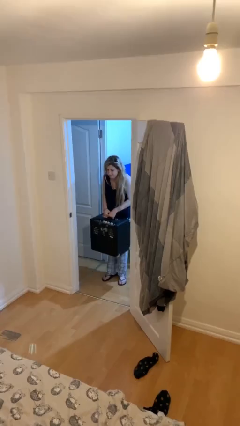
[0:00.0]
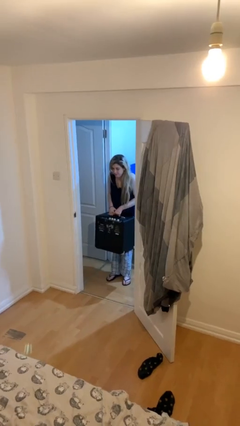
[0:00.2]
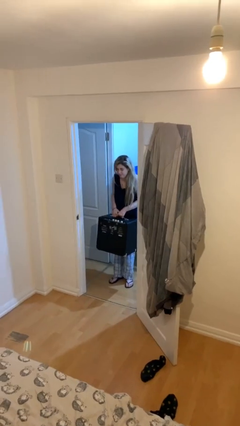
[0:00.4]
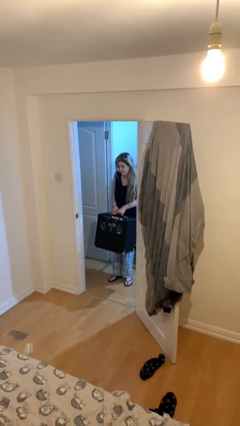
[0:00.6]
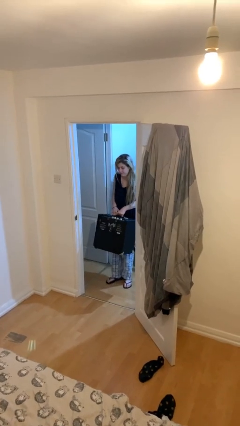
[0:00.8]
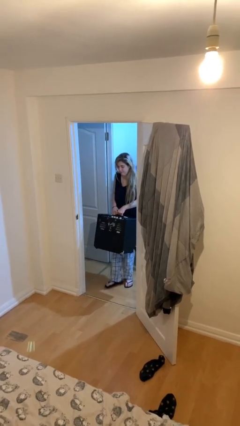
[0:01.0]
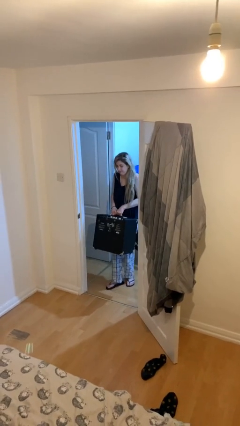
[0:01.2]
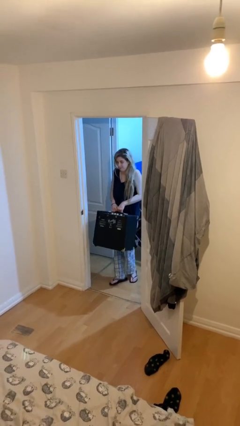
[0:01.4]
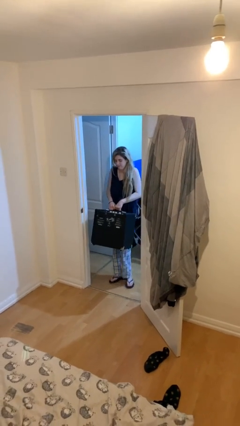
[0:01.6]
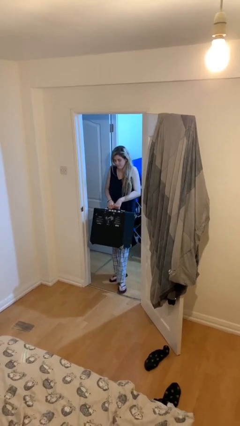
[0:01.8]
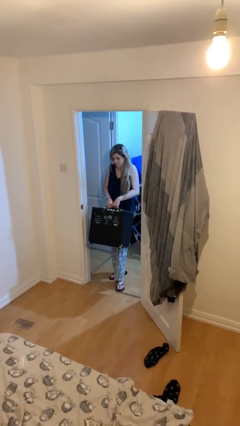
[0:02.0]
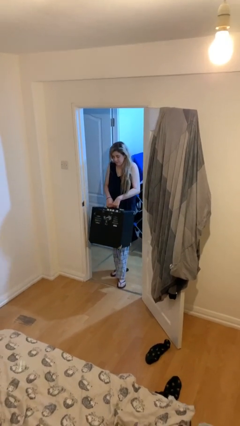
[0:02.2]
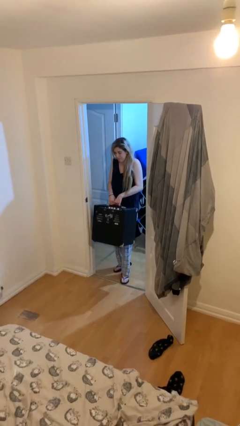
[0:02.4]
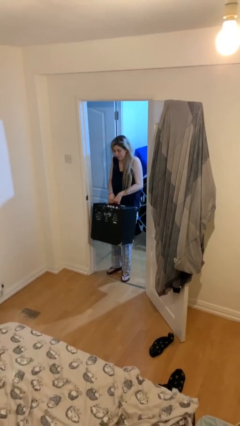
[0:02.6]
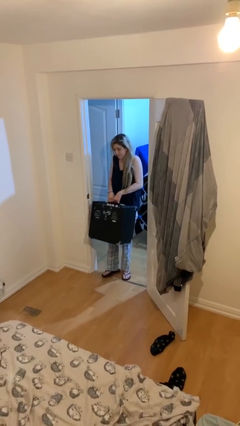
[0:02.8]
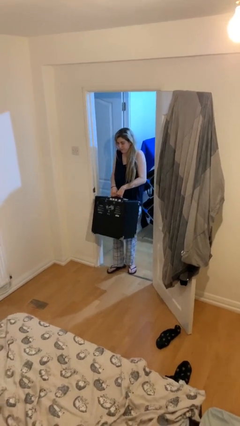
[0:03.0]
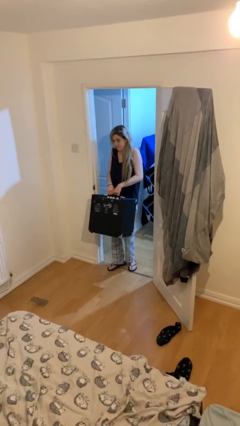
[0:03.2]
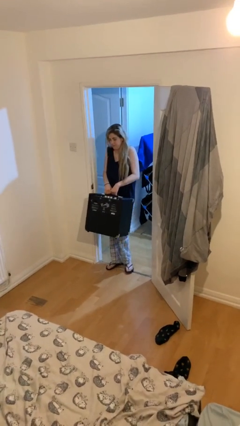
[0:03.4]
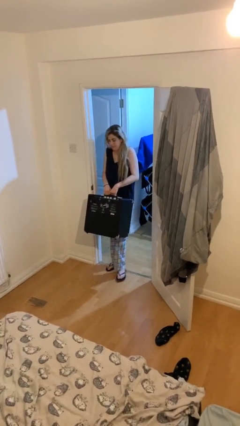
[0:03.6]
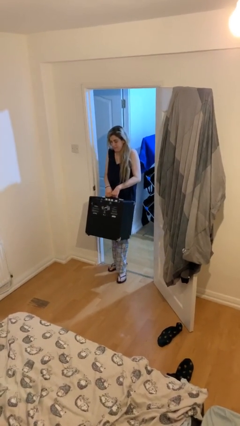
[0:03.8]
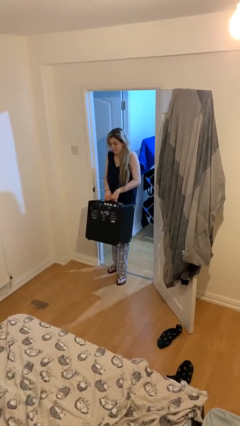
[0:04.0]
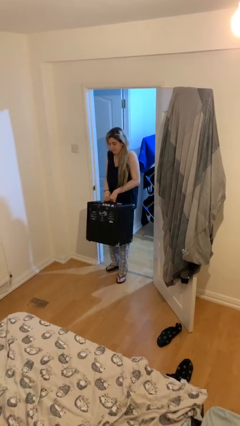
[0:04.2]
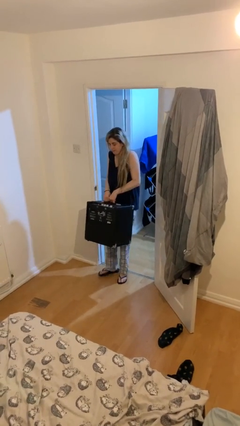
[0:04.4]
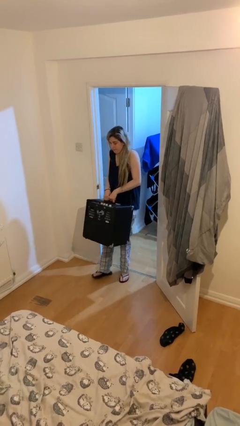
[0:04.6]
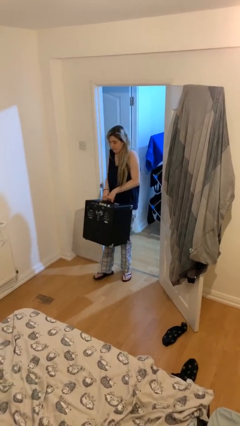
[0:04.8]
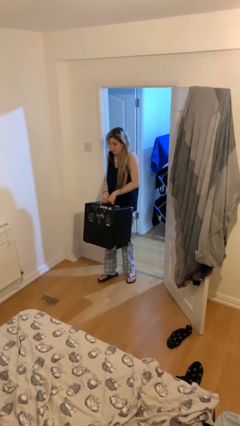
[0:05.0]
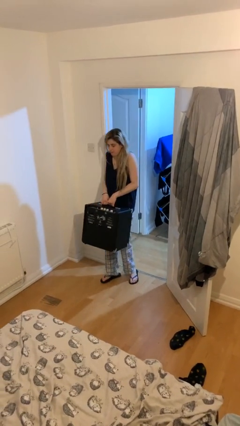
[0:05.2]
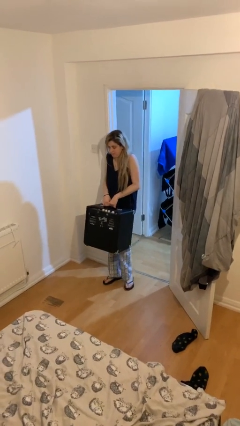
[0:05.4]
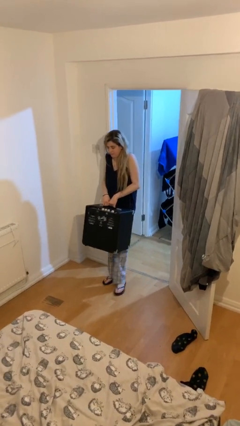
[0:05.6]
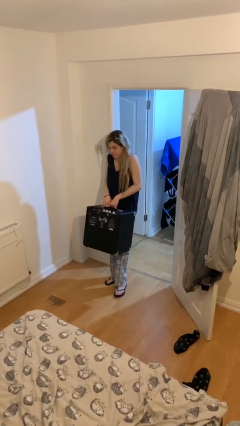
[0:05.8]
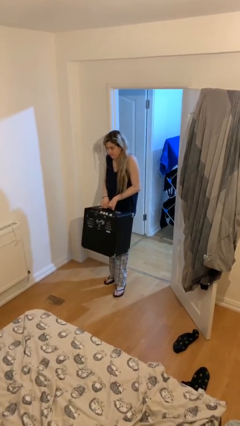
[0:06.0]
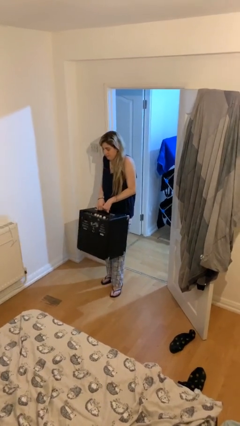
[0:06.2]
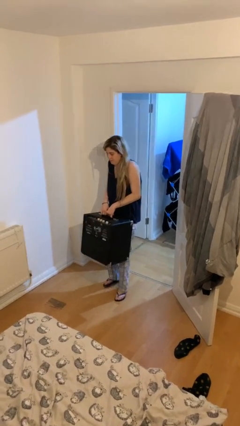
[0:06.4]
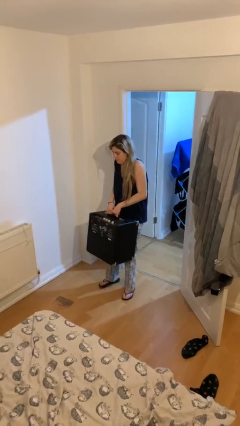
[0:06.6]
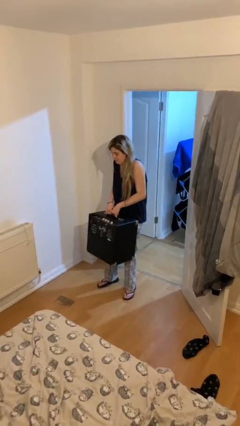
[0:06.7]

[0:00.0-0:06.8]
person carries heavy object

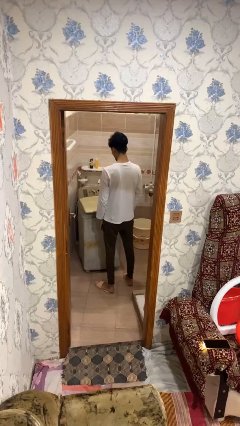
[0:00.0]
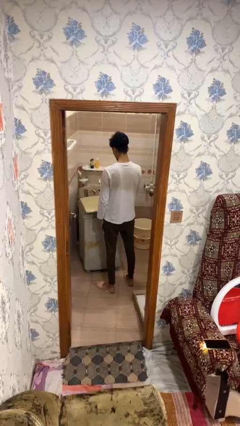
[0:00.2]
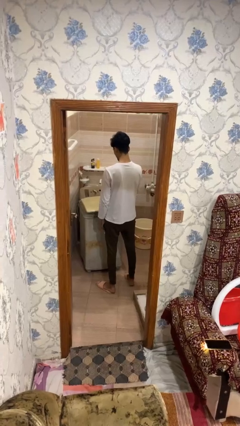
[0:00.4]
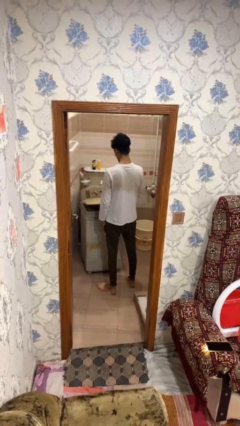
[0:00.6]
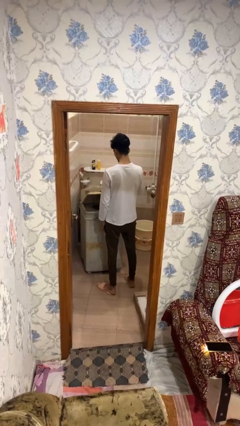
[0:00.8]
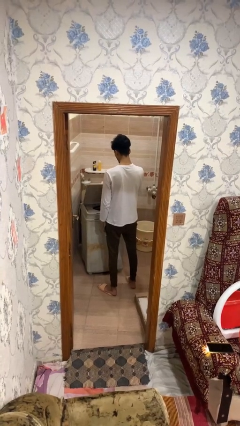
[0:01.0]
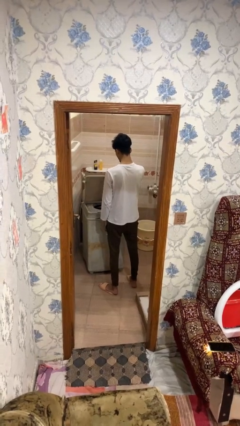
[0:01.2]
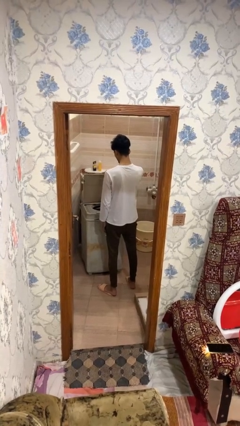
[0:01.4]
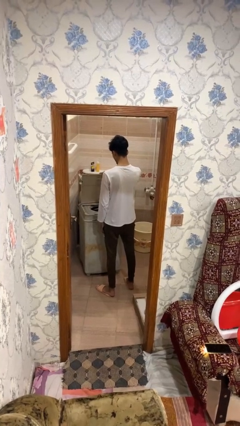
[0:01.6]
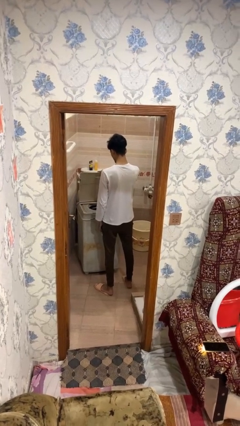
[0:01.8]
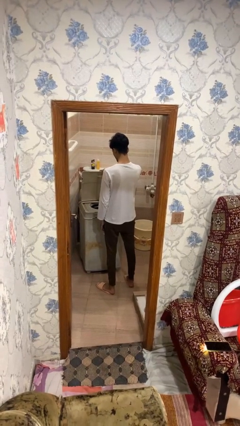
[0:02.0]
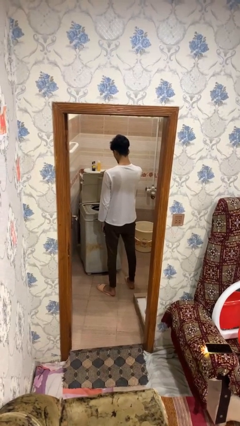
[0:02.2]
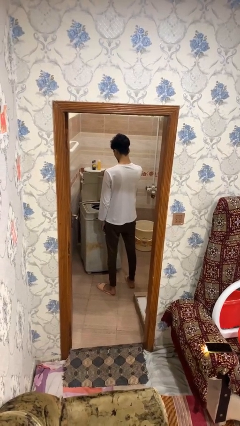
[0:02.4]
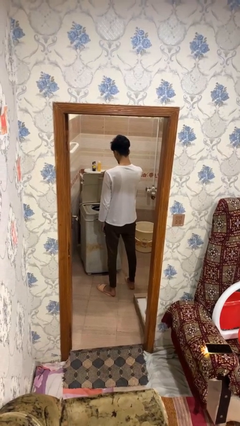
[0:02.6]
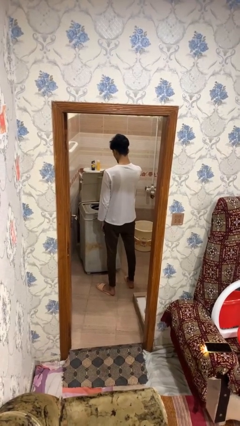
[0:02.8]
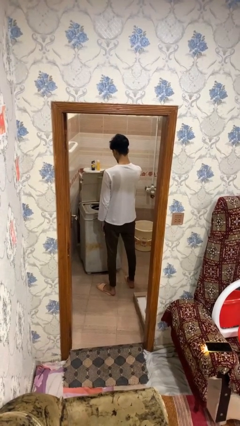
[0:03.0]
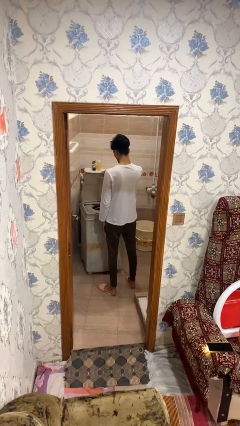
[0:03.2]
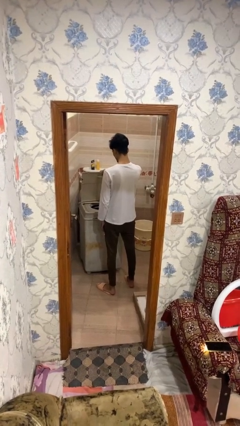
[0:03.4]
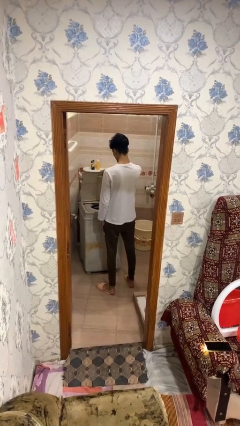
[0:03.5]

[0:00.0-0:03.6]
person opens clothes washer

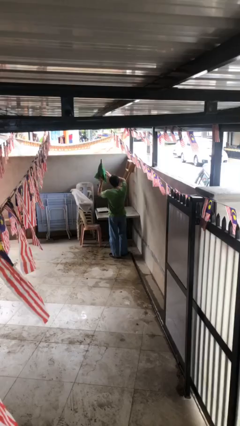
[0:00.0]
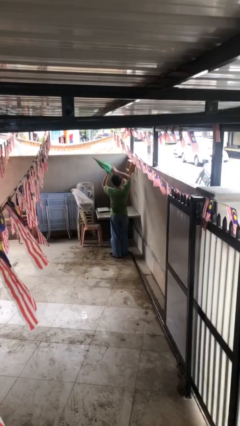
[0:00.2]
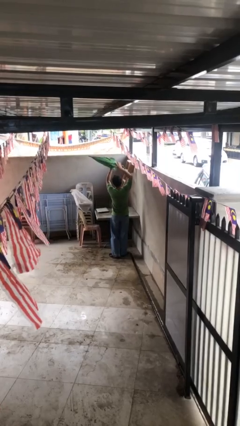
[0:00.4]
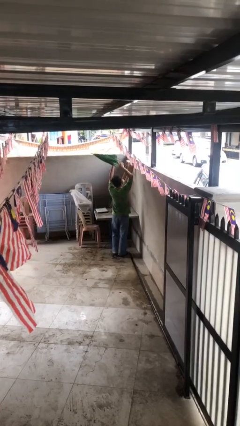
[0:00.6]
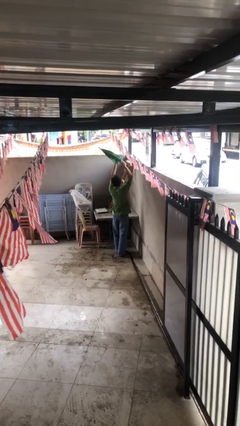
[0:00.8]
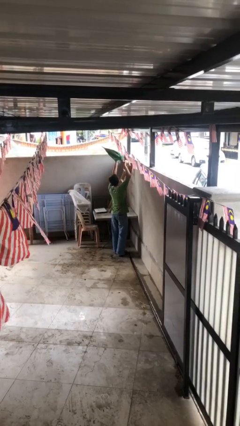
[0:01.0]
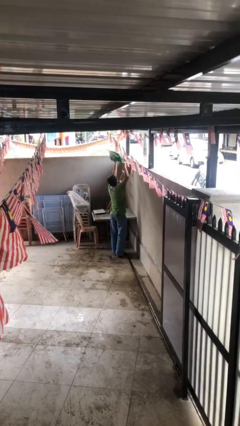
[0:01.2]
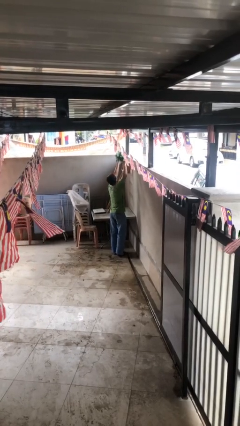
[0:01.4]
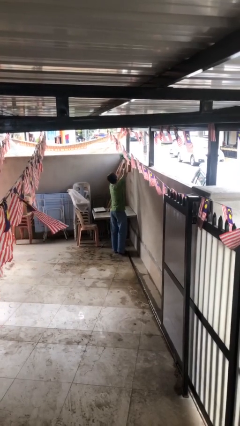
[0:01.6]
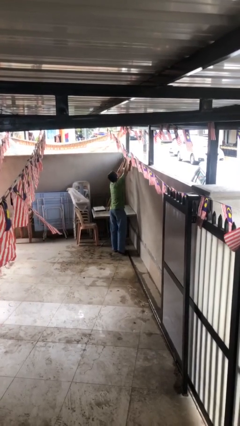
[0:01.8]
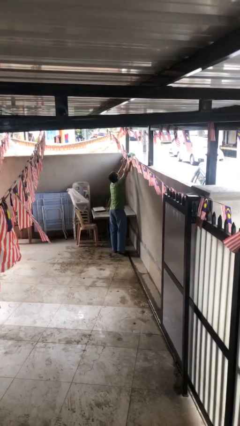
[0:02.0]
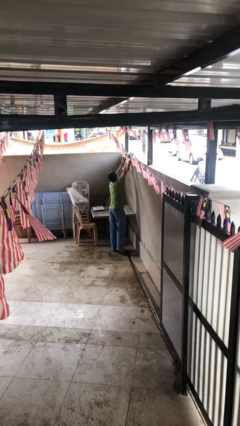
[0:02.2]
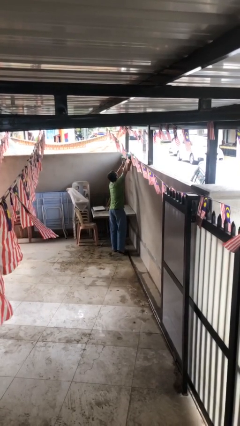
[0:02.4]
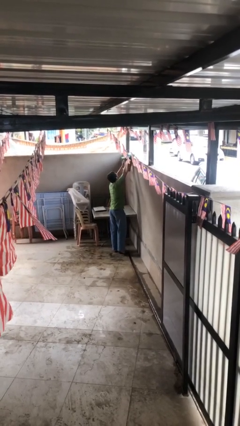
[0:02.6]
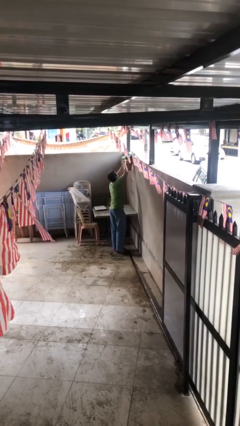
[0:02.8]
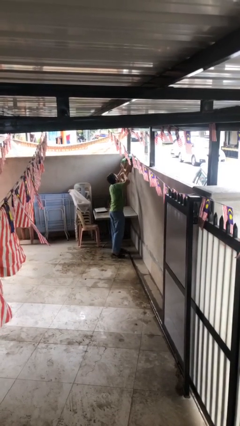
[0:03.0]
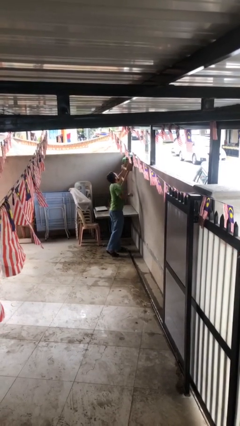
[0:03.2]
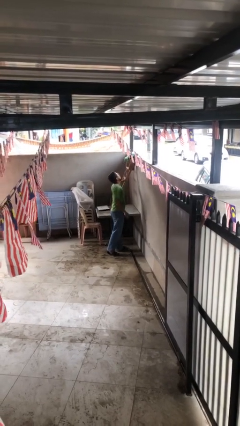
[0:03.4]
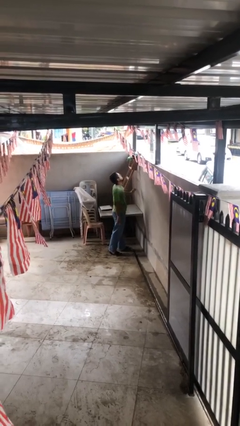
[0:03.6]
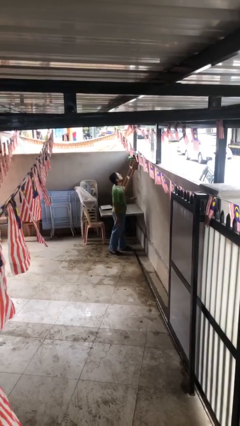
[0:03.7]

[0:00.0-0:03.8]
person puts down object on shelf

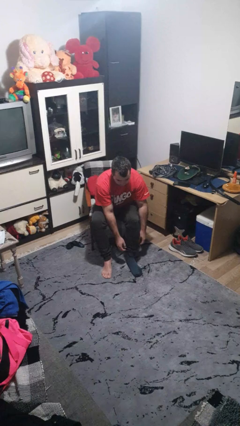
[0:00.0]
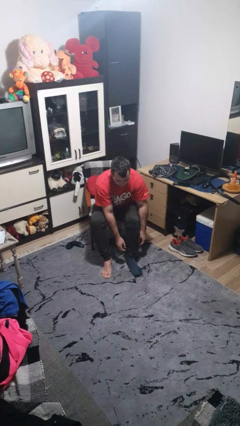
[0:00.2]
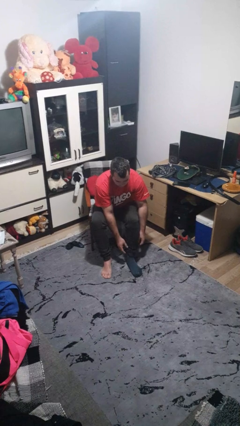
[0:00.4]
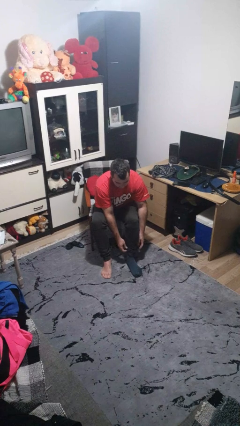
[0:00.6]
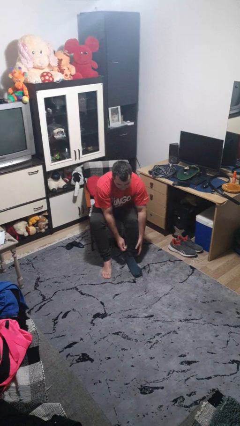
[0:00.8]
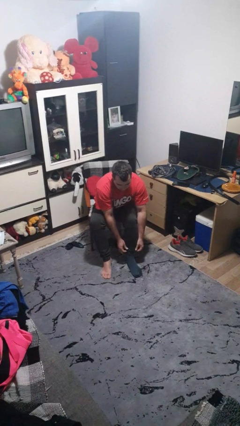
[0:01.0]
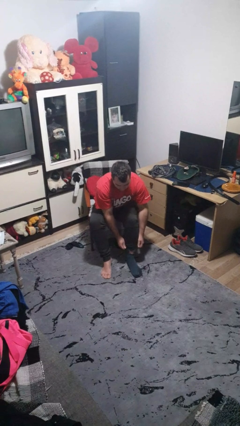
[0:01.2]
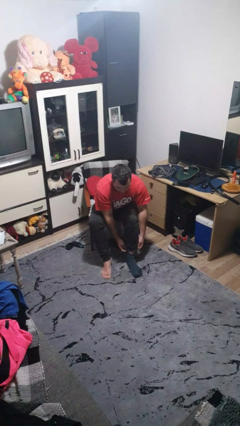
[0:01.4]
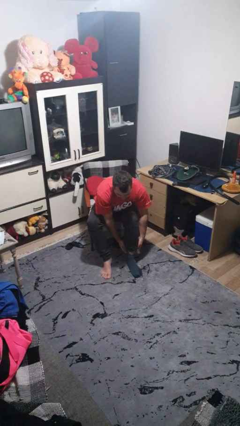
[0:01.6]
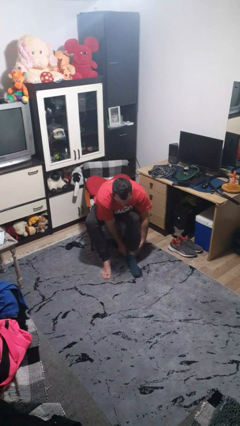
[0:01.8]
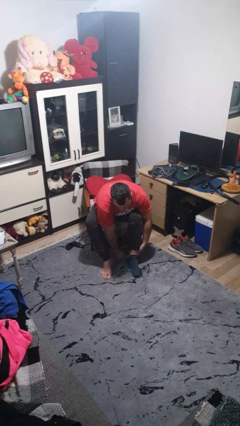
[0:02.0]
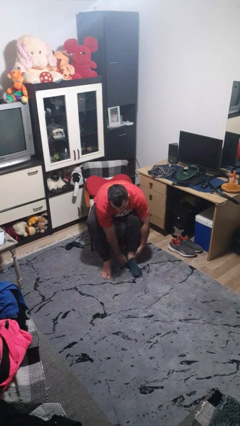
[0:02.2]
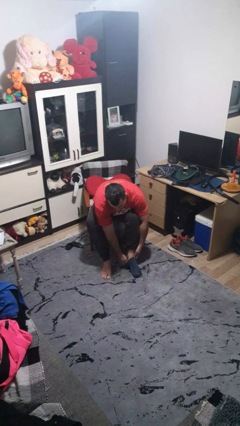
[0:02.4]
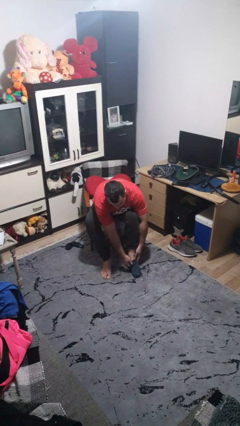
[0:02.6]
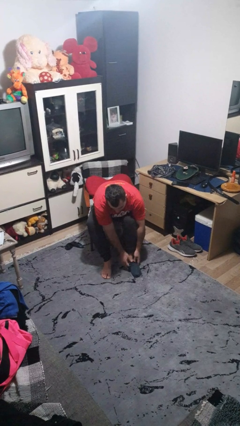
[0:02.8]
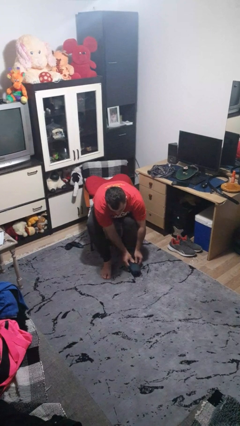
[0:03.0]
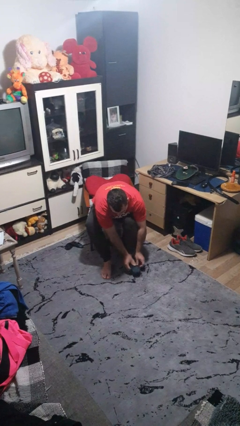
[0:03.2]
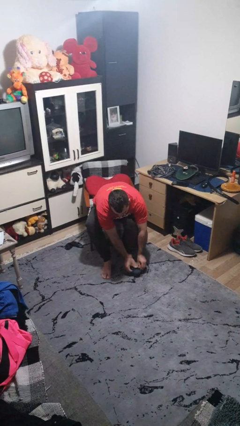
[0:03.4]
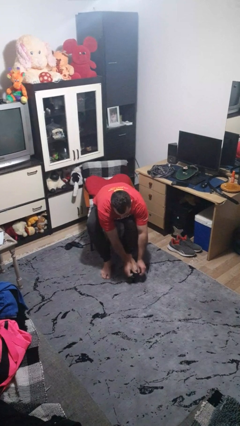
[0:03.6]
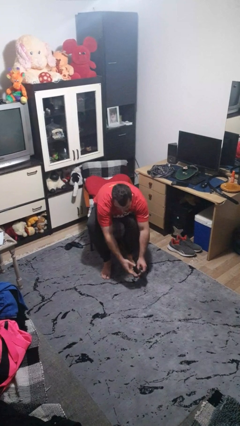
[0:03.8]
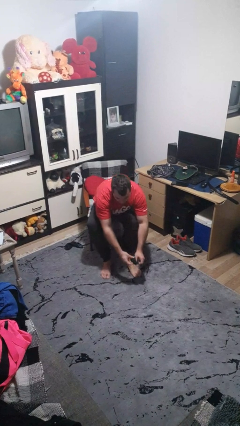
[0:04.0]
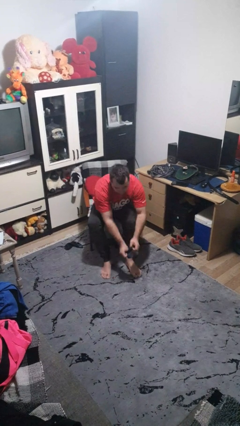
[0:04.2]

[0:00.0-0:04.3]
person takes off socks
